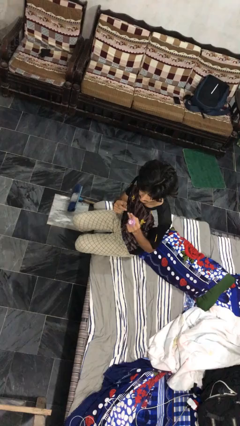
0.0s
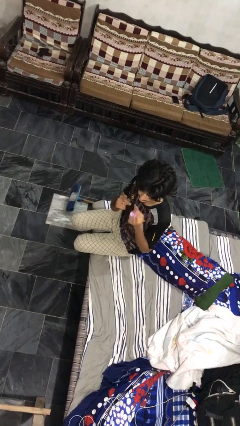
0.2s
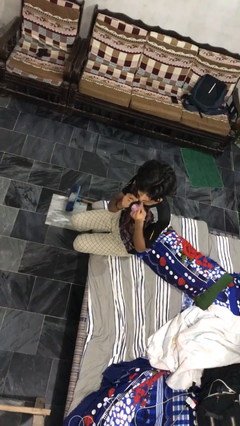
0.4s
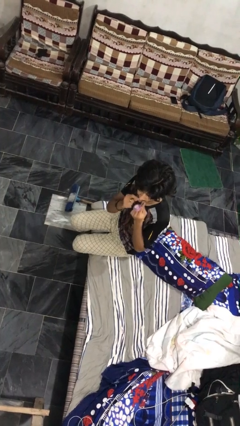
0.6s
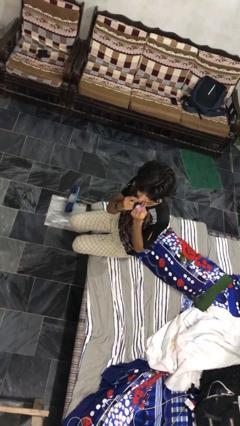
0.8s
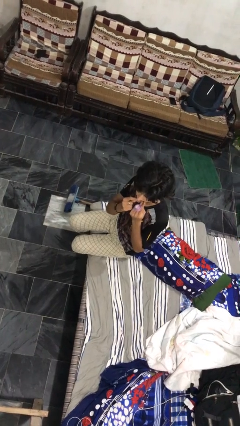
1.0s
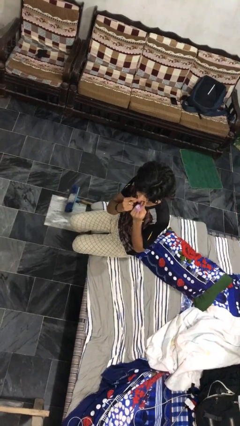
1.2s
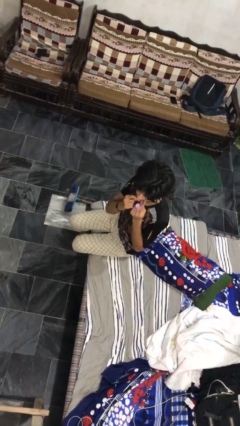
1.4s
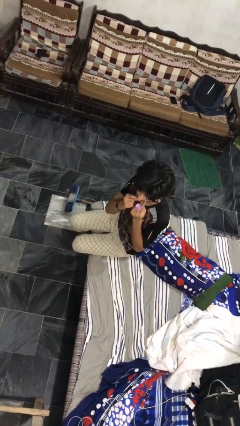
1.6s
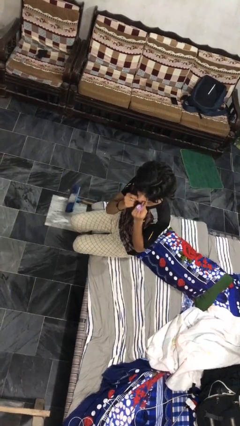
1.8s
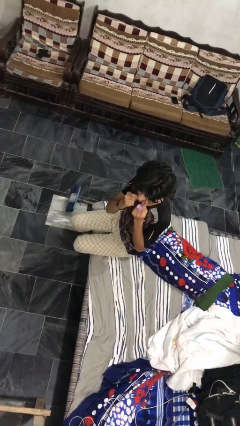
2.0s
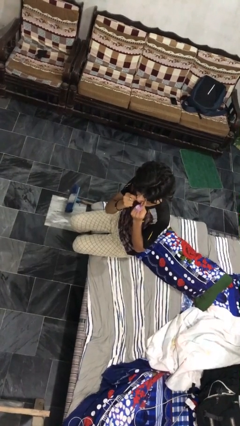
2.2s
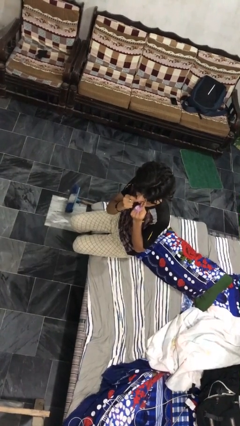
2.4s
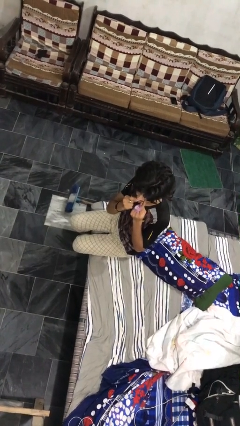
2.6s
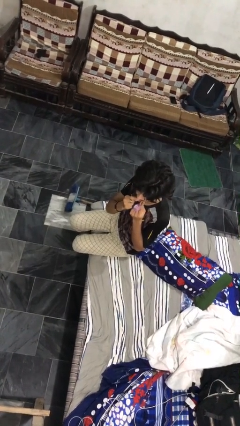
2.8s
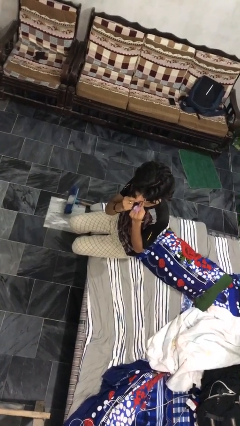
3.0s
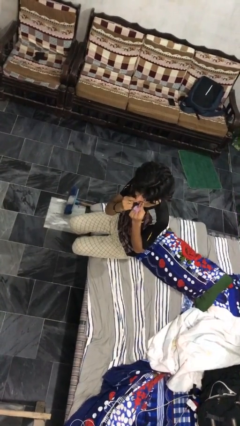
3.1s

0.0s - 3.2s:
person flosses

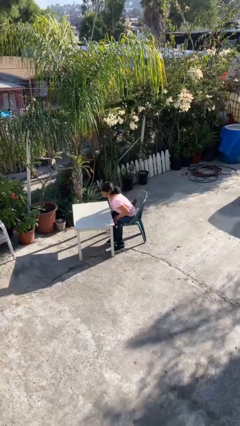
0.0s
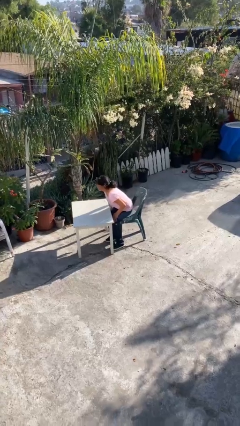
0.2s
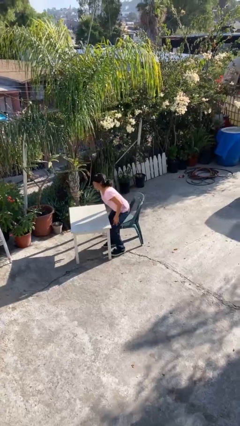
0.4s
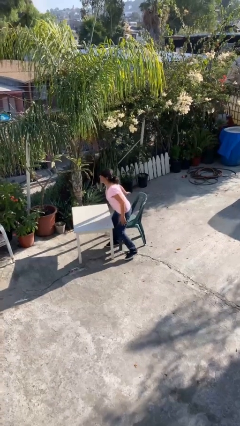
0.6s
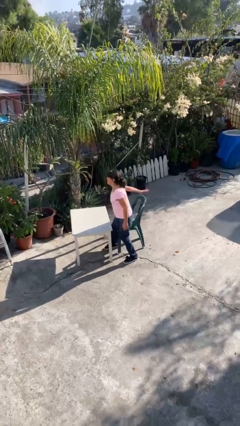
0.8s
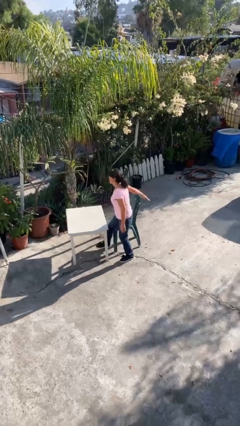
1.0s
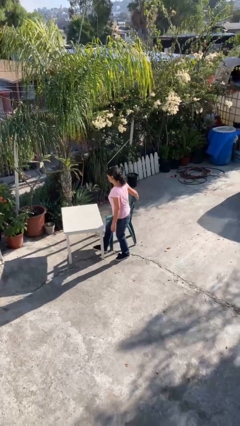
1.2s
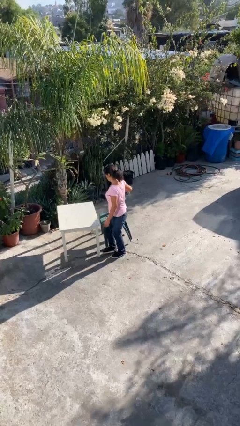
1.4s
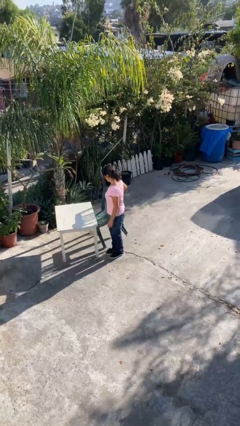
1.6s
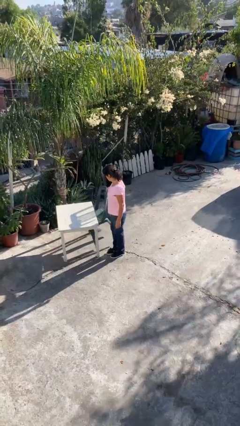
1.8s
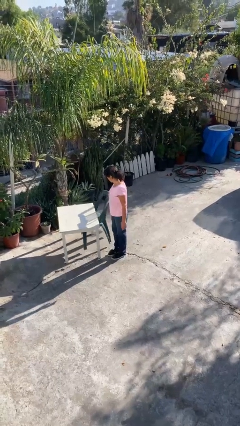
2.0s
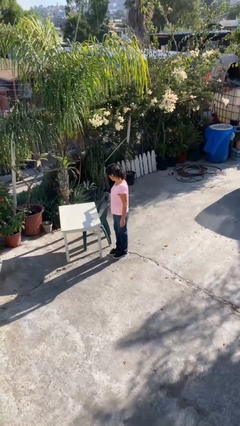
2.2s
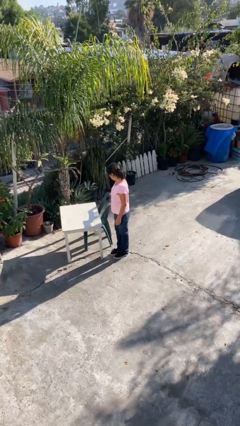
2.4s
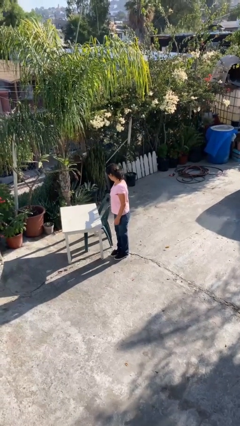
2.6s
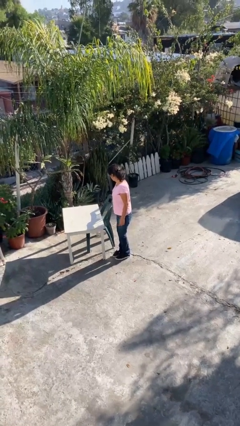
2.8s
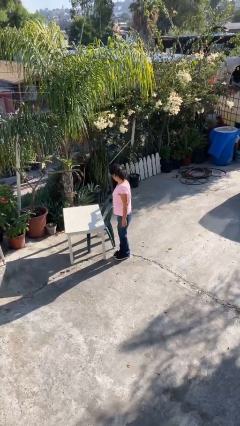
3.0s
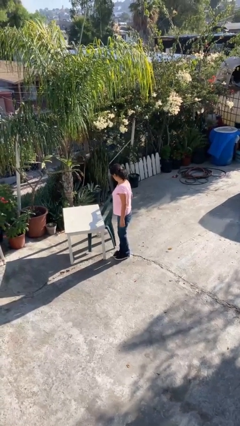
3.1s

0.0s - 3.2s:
person stands up

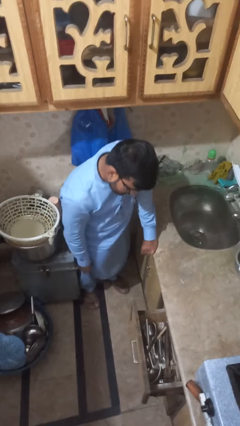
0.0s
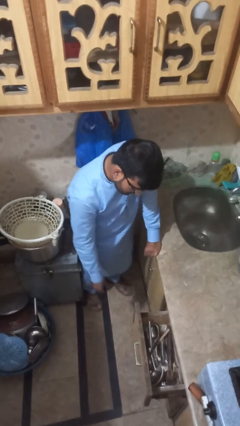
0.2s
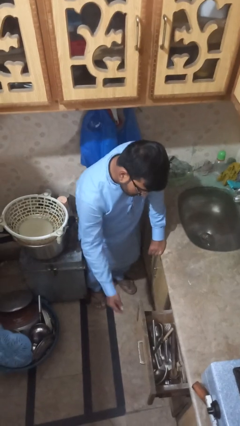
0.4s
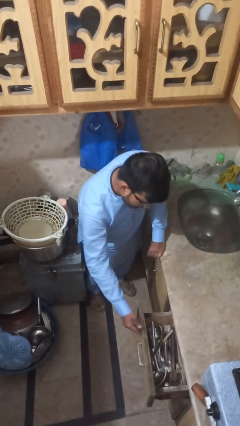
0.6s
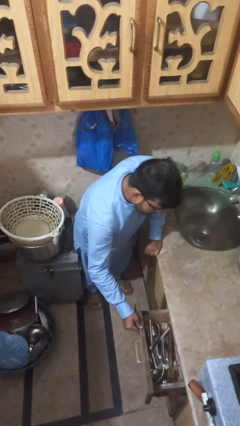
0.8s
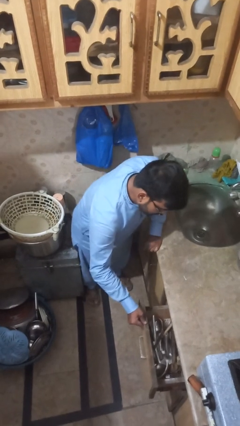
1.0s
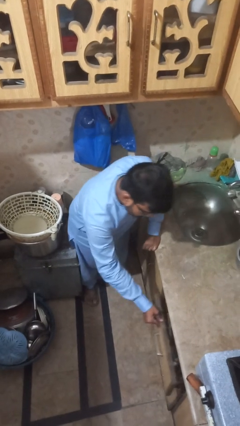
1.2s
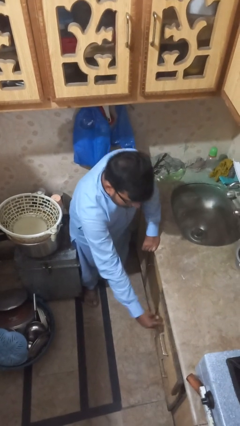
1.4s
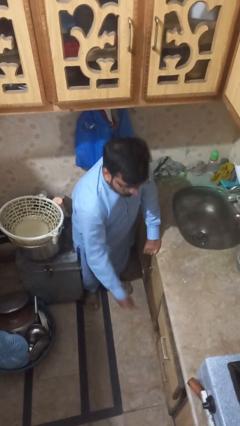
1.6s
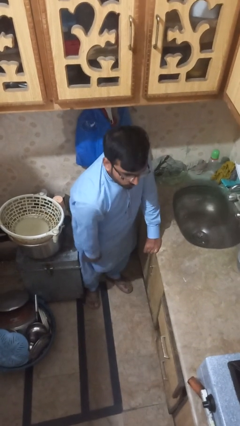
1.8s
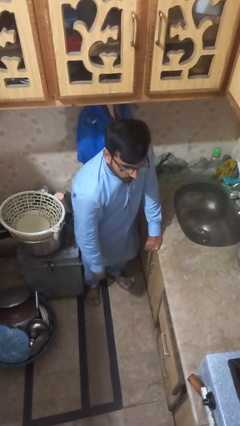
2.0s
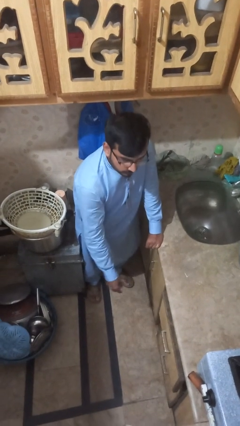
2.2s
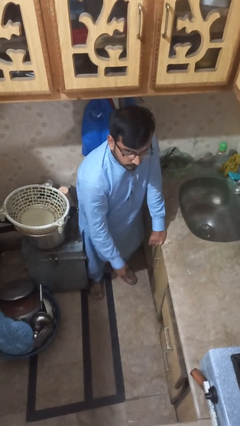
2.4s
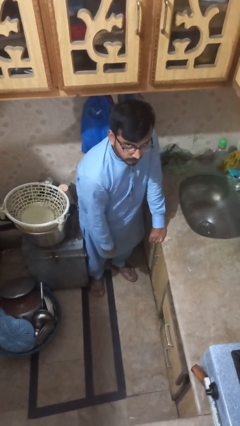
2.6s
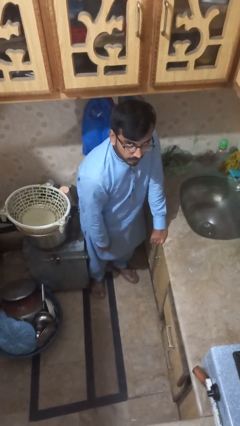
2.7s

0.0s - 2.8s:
person closes kitchen drawer

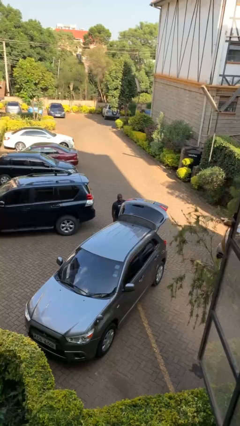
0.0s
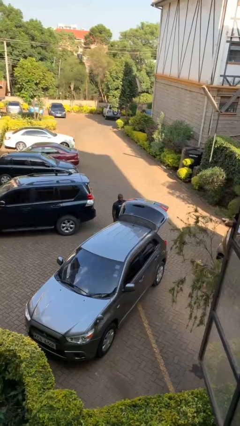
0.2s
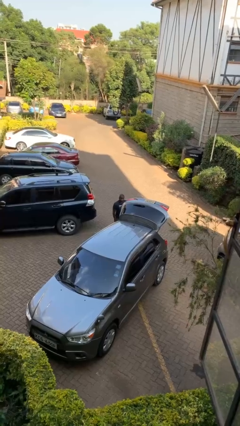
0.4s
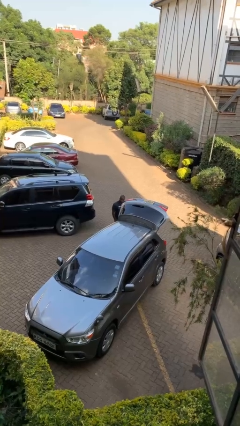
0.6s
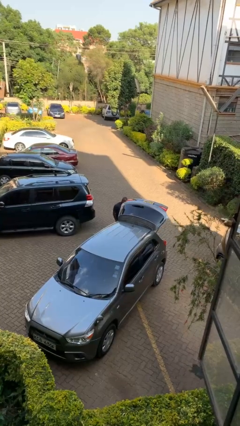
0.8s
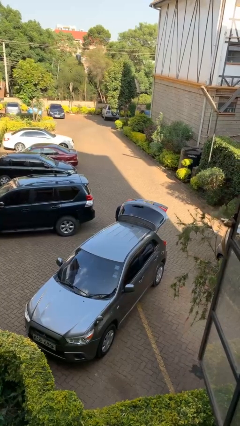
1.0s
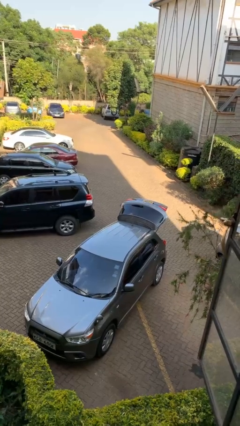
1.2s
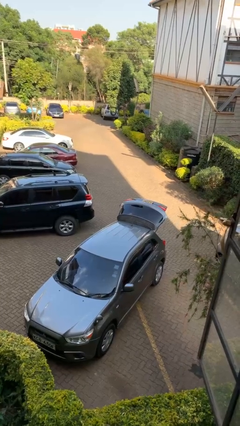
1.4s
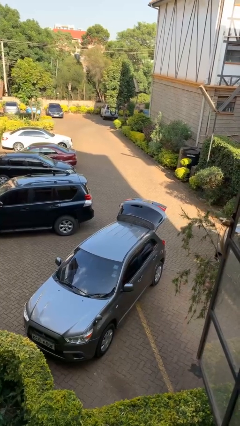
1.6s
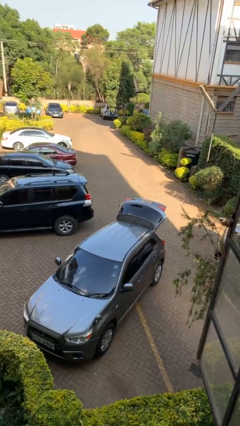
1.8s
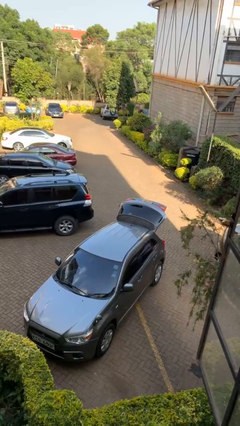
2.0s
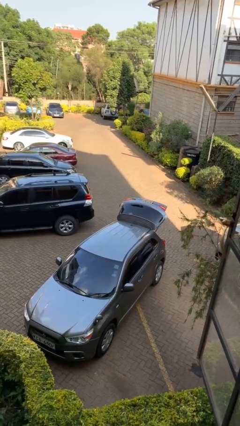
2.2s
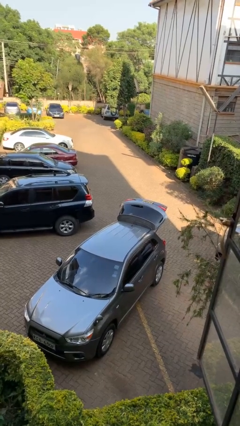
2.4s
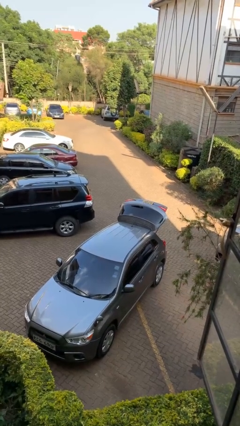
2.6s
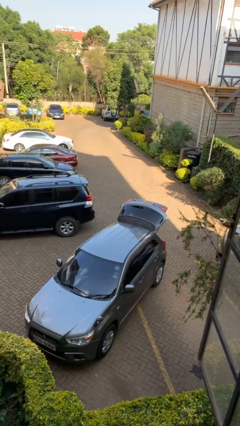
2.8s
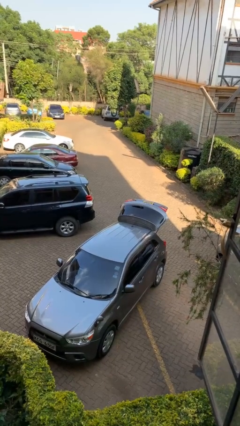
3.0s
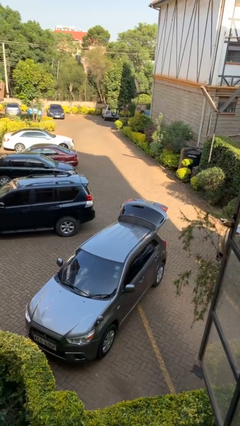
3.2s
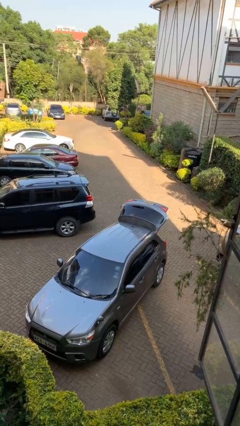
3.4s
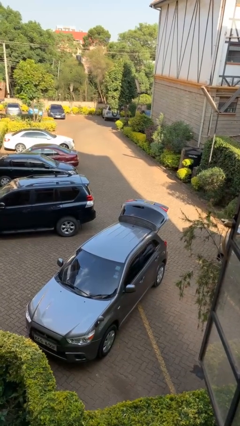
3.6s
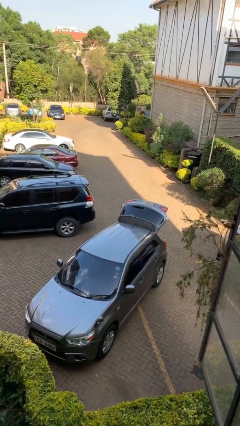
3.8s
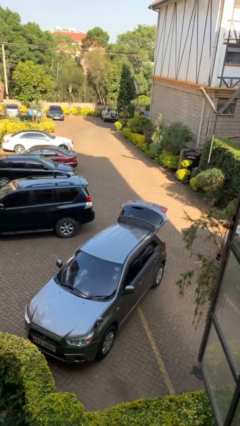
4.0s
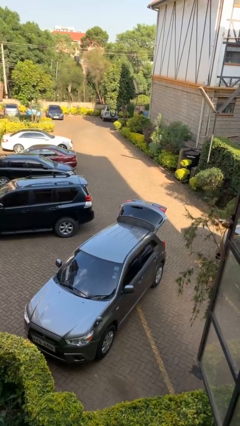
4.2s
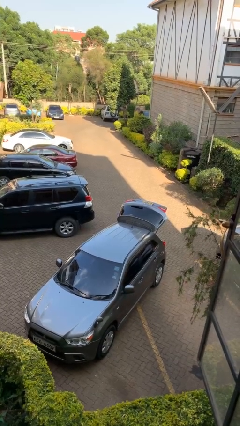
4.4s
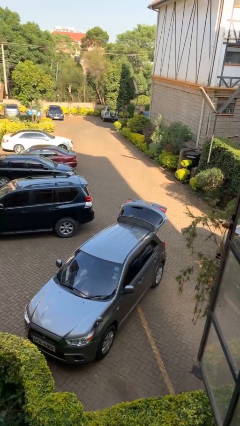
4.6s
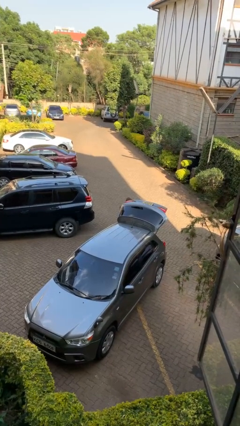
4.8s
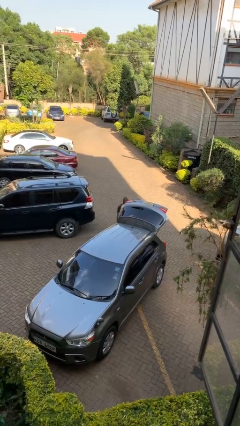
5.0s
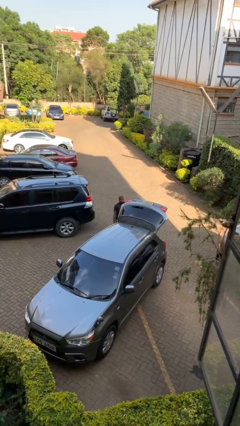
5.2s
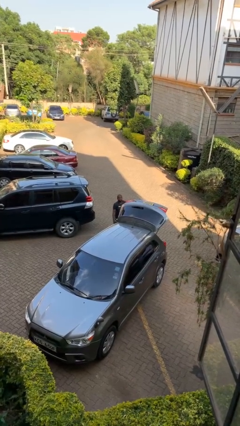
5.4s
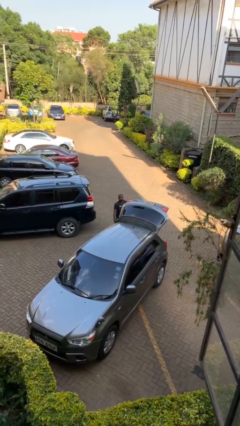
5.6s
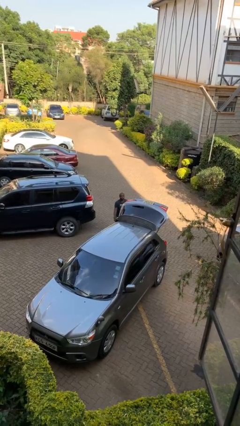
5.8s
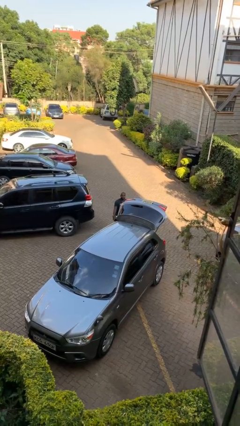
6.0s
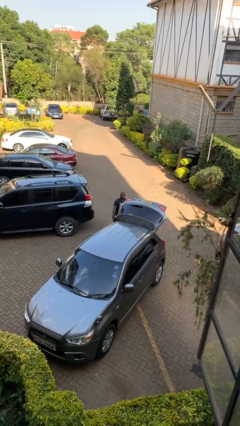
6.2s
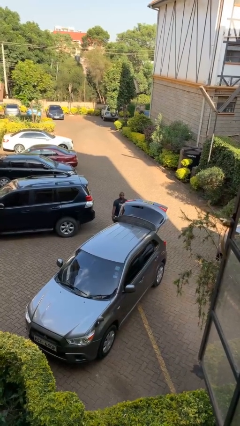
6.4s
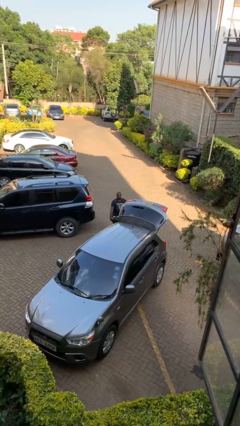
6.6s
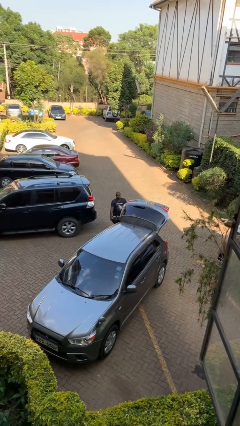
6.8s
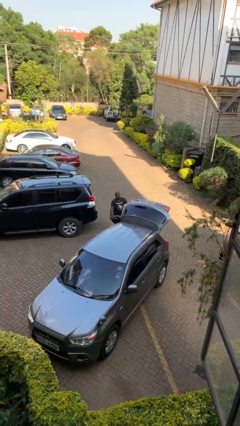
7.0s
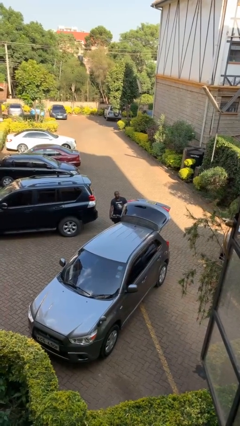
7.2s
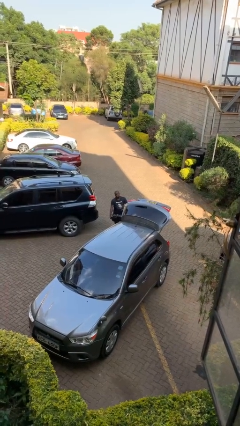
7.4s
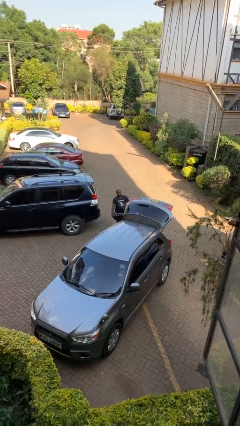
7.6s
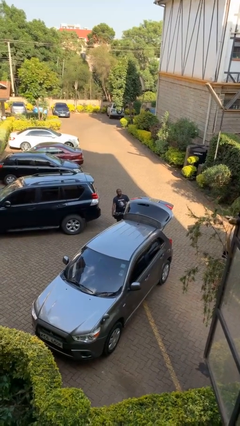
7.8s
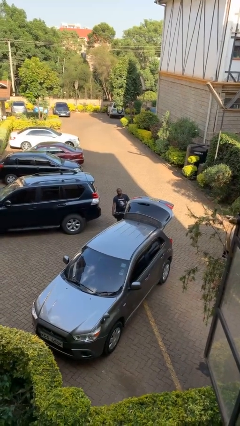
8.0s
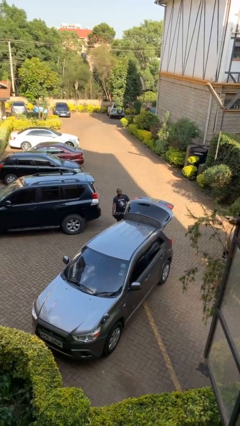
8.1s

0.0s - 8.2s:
person unloads car

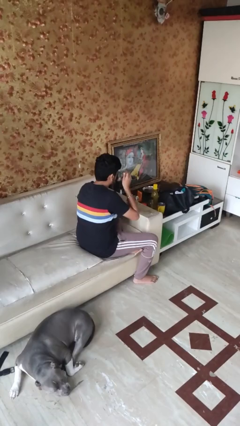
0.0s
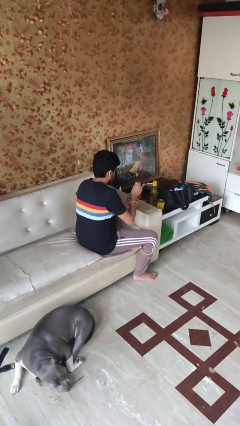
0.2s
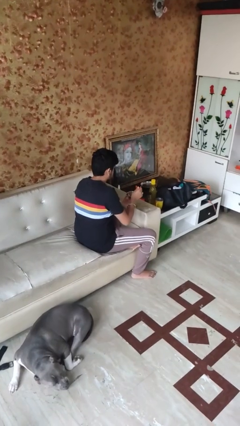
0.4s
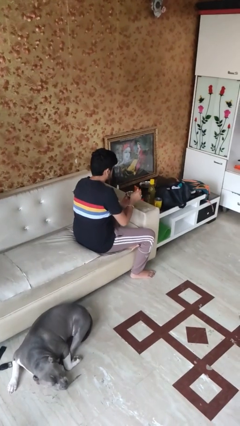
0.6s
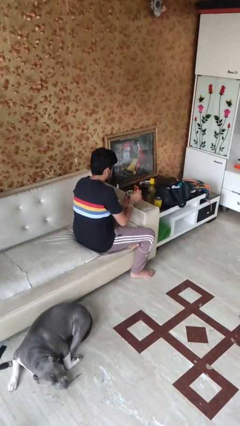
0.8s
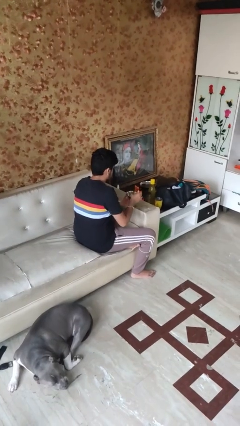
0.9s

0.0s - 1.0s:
person eats with utensil
